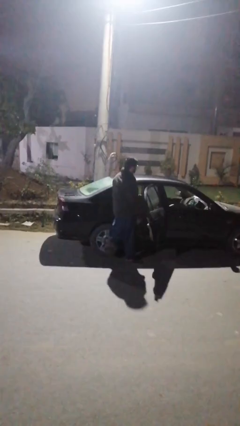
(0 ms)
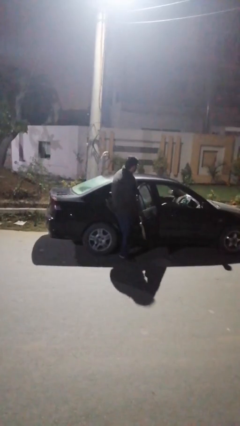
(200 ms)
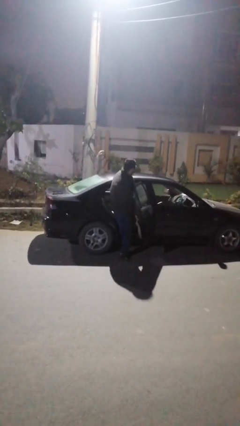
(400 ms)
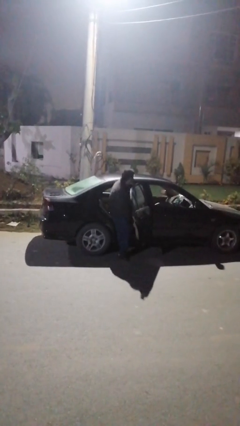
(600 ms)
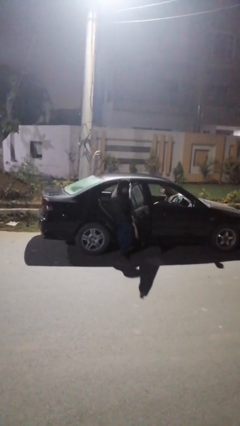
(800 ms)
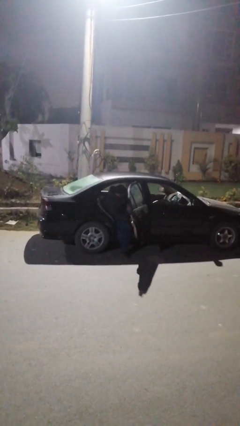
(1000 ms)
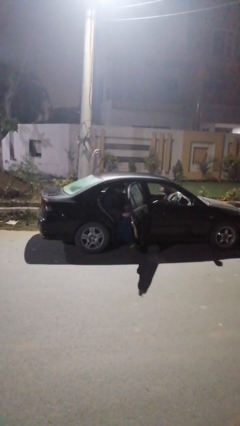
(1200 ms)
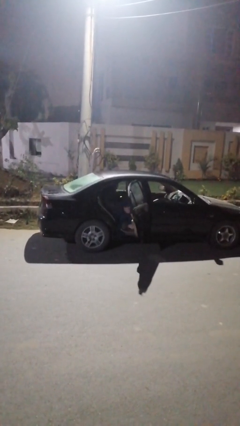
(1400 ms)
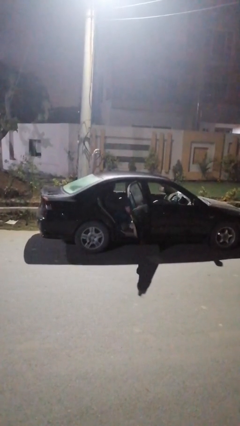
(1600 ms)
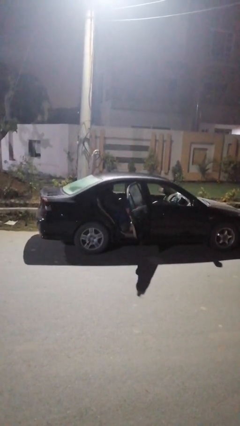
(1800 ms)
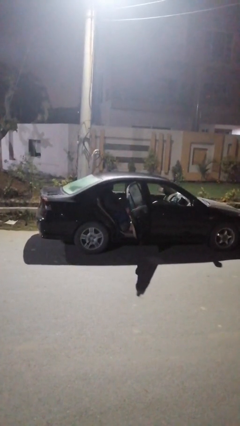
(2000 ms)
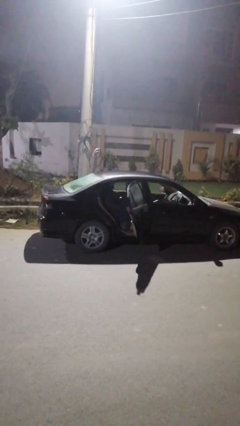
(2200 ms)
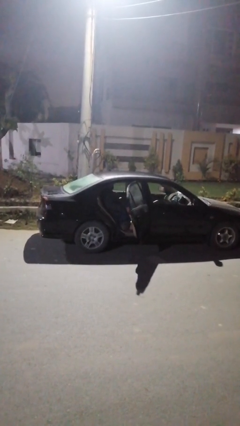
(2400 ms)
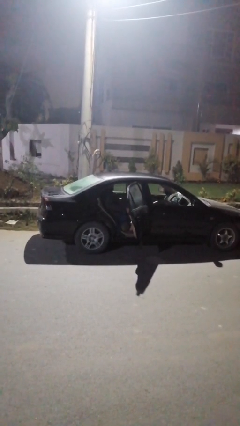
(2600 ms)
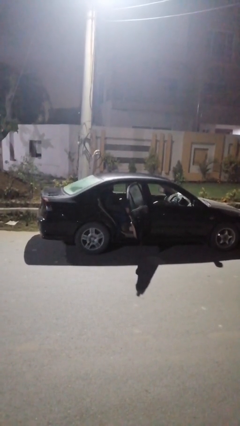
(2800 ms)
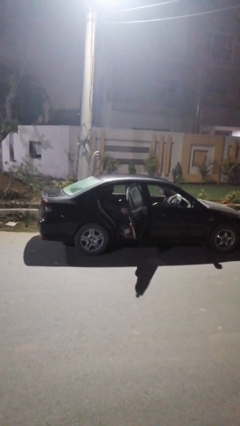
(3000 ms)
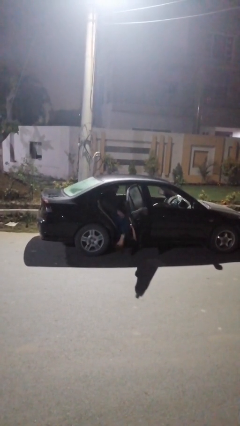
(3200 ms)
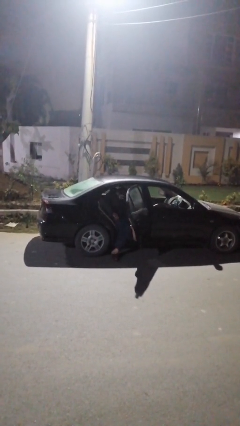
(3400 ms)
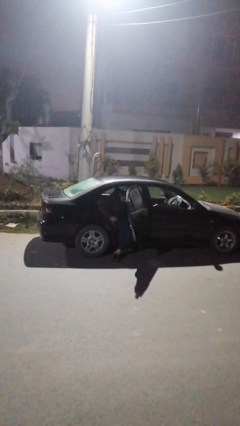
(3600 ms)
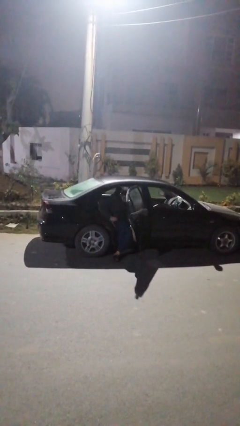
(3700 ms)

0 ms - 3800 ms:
person enters car

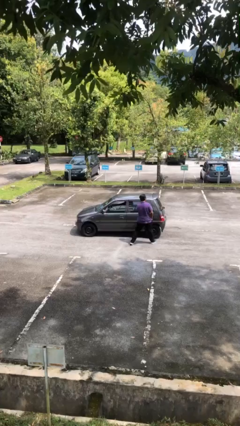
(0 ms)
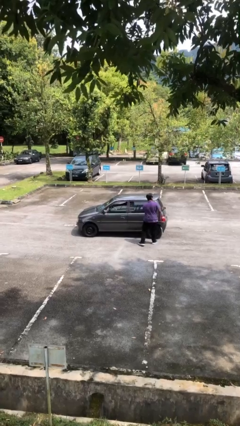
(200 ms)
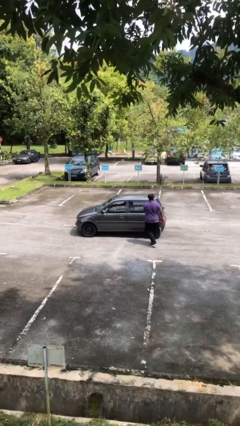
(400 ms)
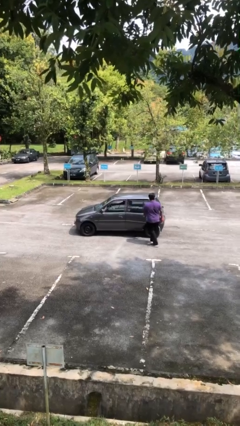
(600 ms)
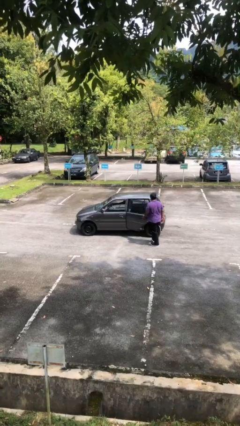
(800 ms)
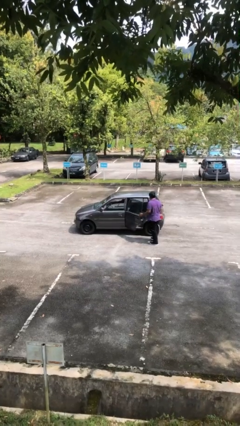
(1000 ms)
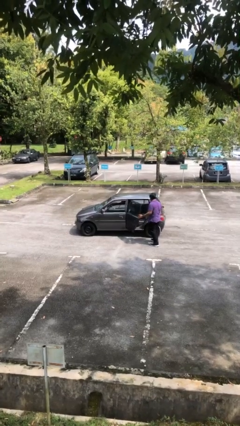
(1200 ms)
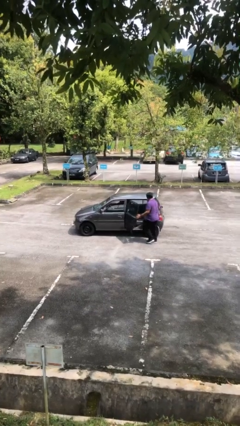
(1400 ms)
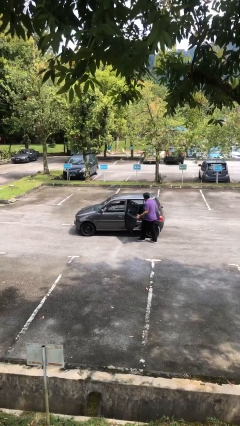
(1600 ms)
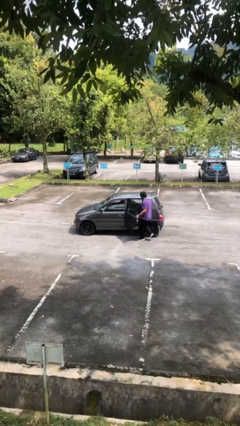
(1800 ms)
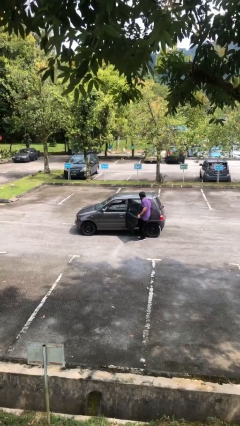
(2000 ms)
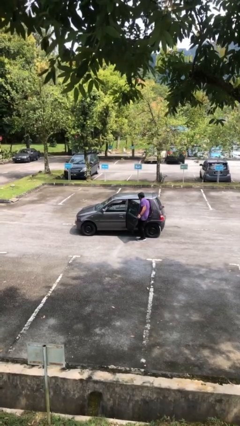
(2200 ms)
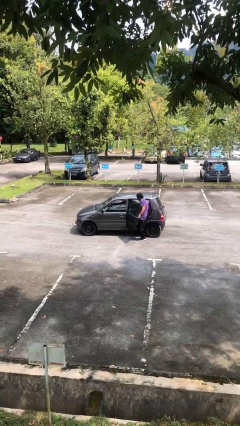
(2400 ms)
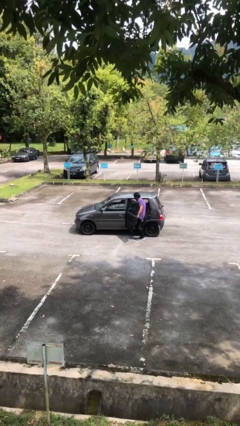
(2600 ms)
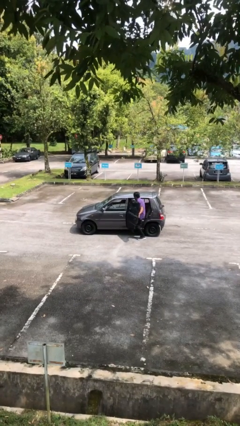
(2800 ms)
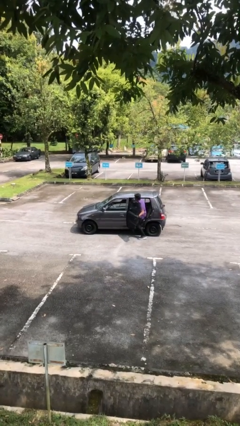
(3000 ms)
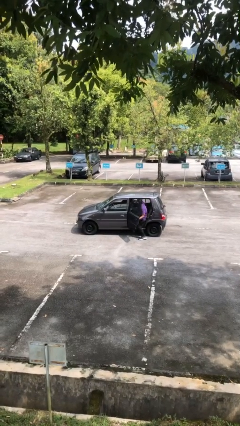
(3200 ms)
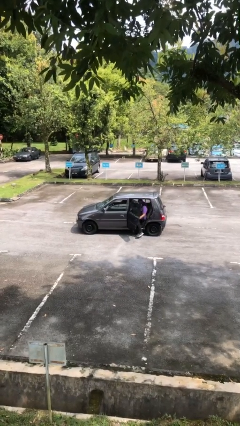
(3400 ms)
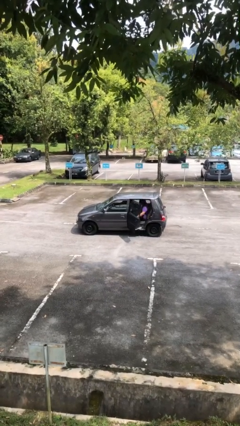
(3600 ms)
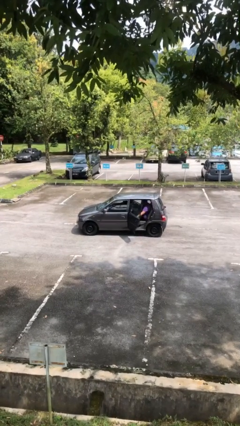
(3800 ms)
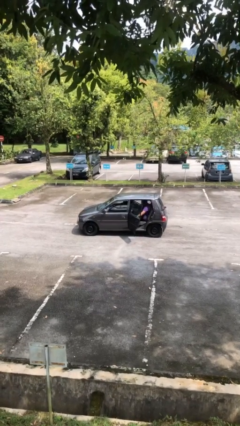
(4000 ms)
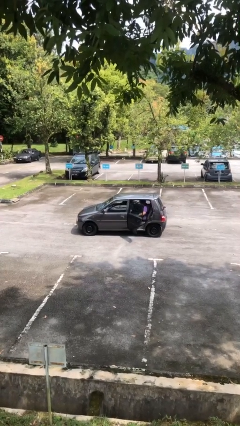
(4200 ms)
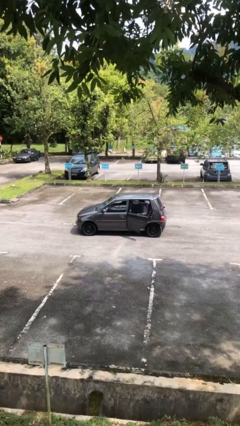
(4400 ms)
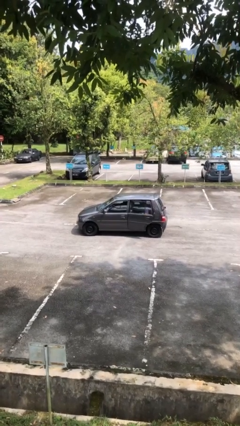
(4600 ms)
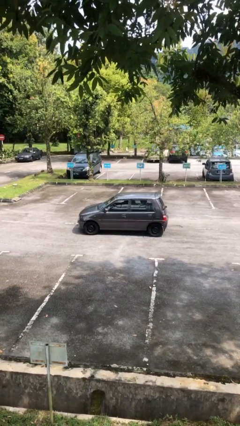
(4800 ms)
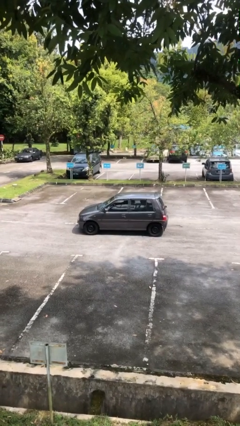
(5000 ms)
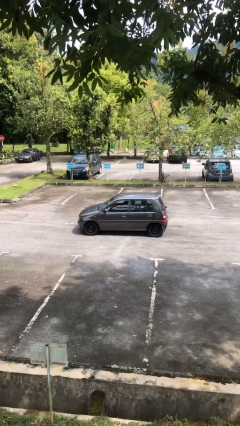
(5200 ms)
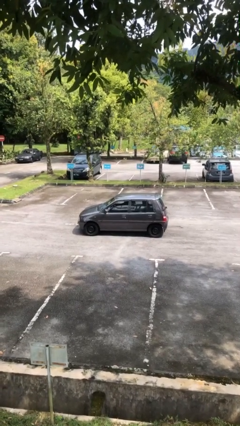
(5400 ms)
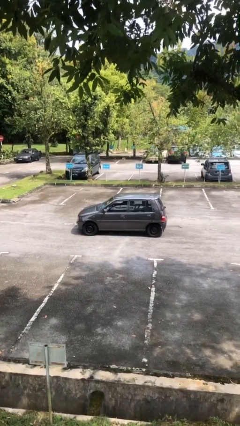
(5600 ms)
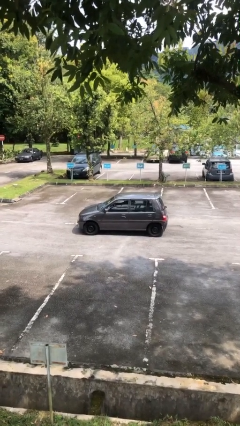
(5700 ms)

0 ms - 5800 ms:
car picks up person

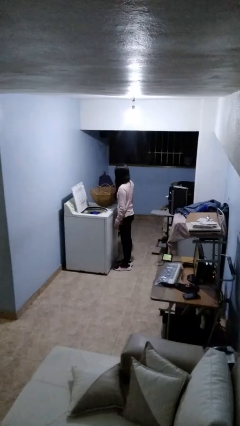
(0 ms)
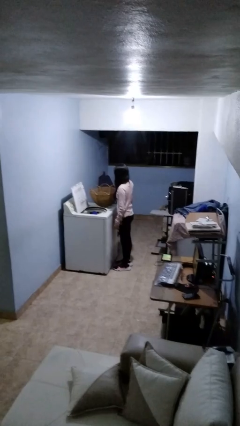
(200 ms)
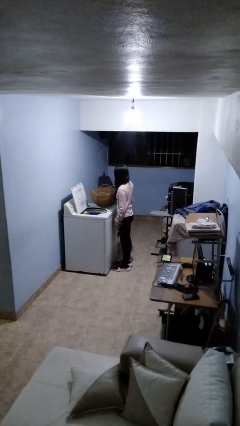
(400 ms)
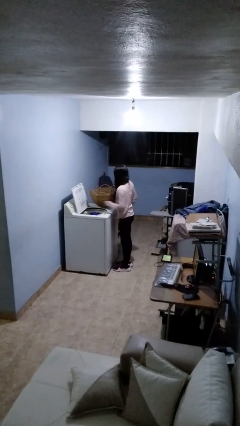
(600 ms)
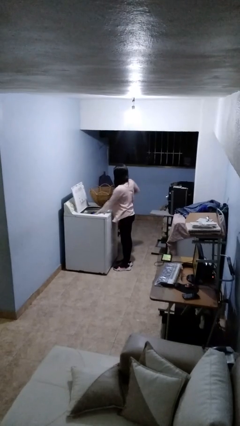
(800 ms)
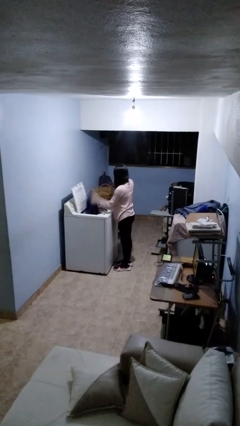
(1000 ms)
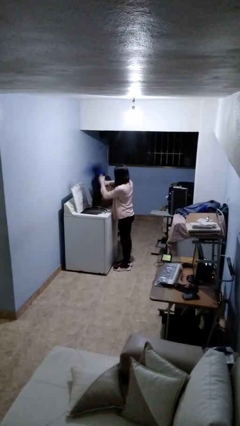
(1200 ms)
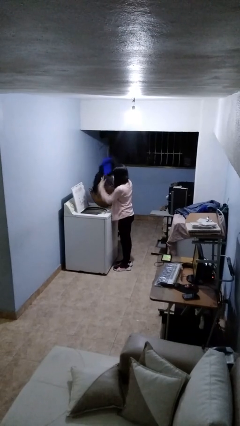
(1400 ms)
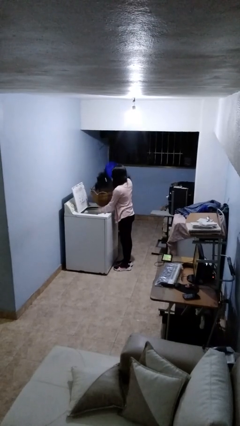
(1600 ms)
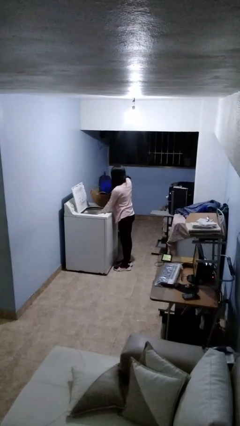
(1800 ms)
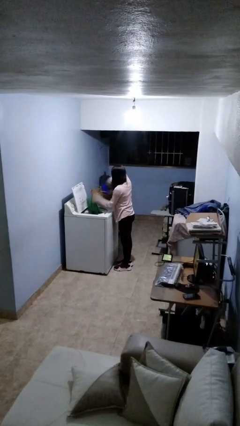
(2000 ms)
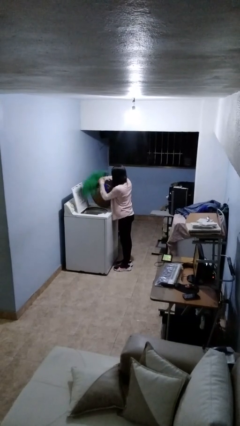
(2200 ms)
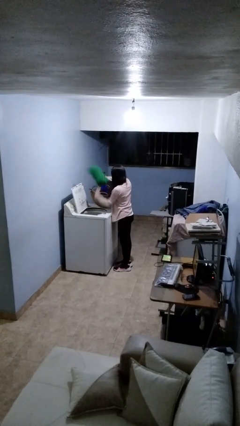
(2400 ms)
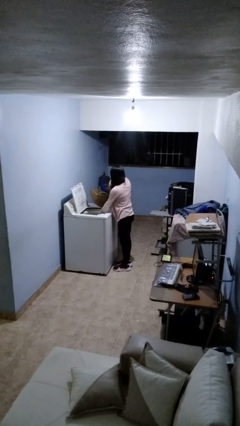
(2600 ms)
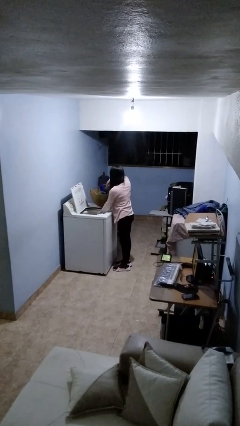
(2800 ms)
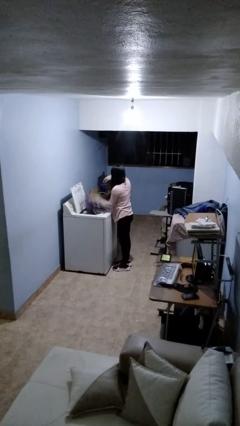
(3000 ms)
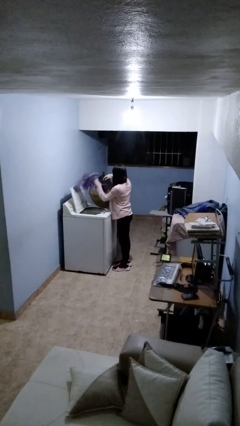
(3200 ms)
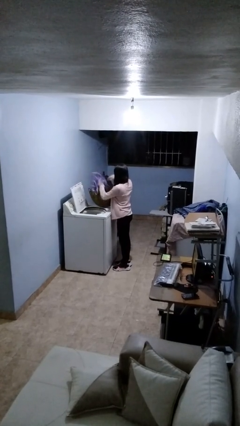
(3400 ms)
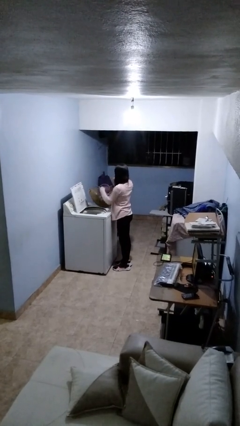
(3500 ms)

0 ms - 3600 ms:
person loads clotheswasher

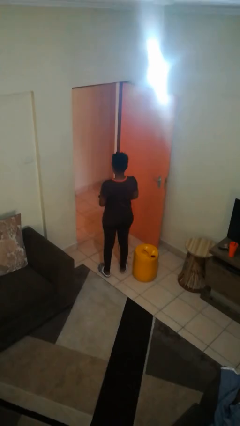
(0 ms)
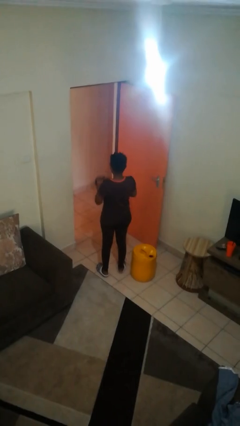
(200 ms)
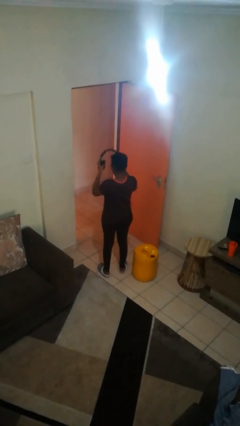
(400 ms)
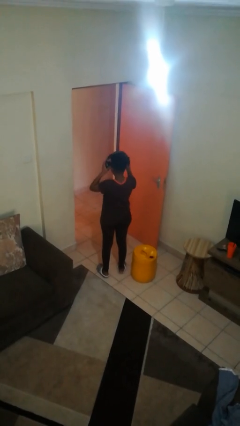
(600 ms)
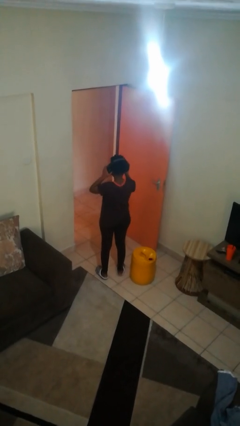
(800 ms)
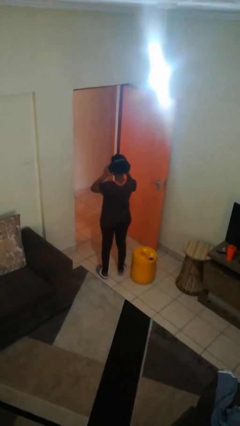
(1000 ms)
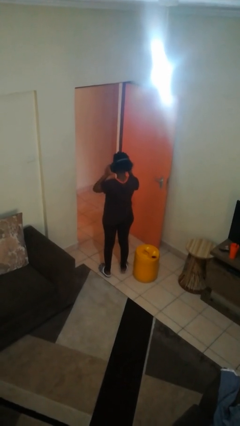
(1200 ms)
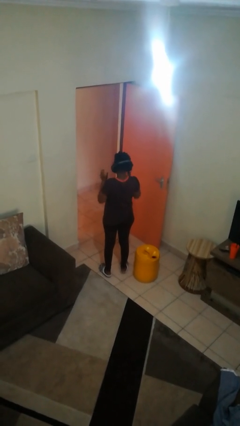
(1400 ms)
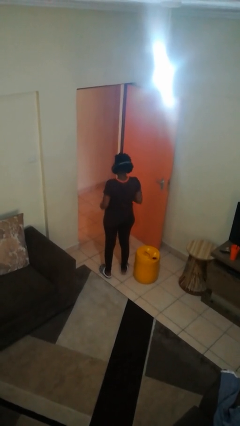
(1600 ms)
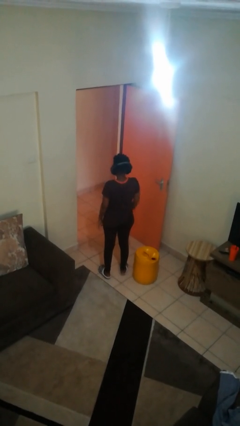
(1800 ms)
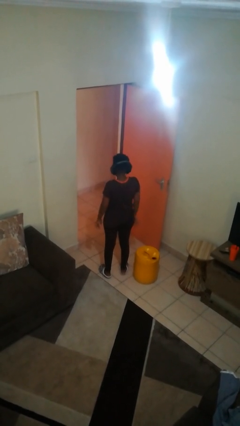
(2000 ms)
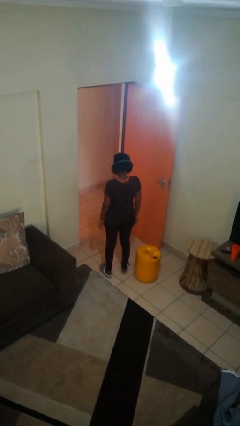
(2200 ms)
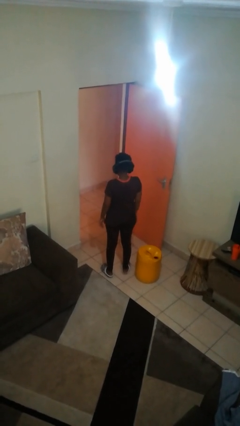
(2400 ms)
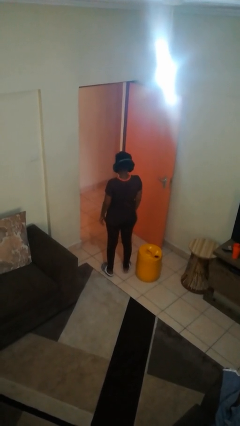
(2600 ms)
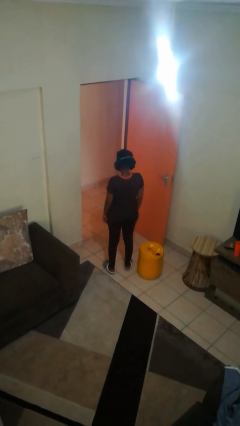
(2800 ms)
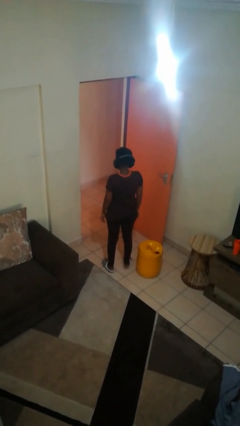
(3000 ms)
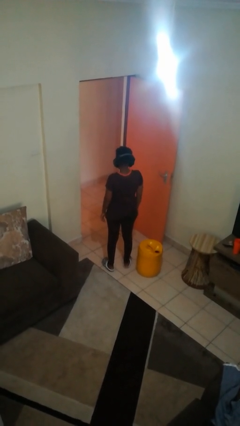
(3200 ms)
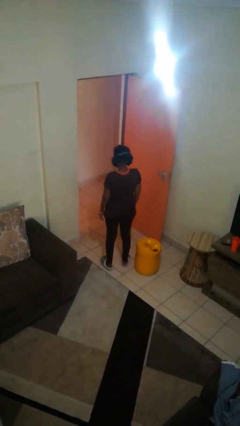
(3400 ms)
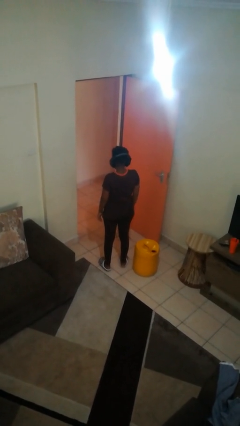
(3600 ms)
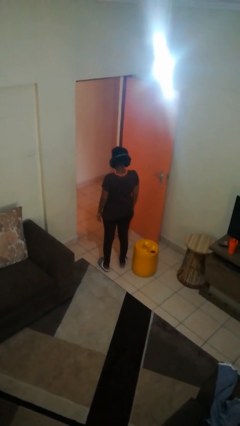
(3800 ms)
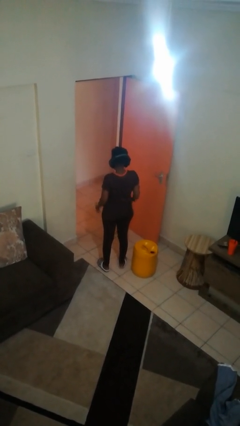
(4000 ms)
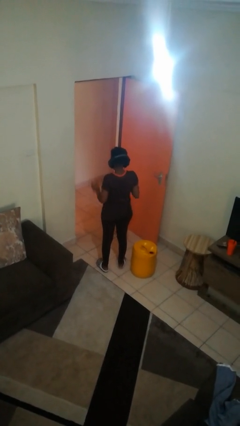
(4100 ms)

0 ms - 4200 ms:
person puts on headphones
